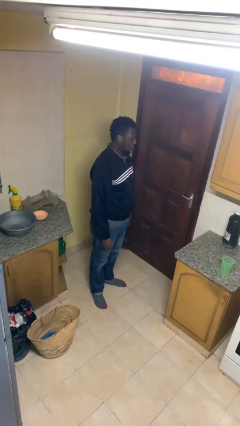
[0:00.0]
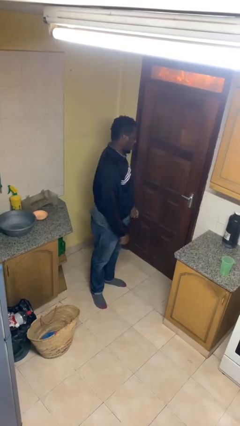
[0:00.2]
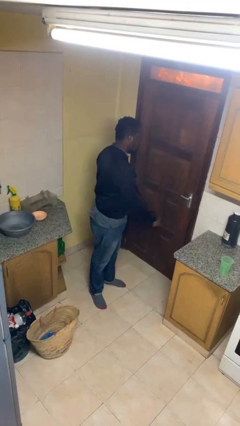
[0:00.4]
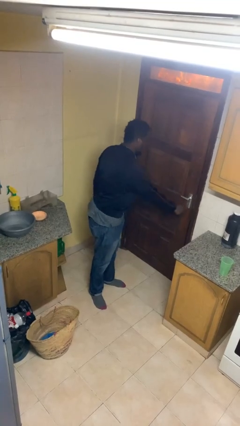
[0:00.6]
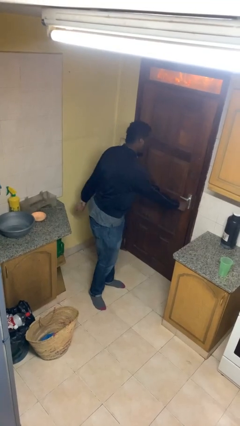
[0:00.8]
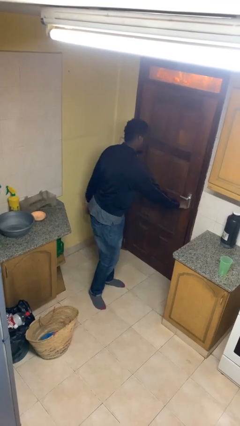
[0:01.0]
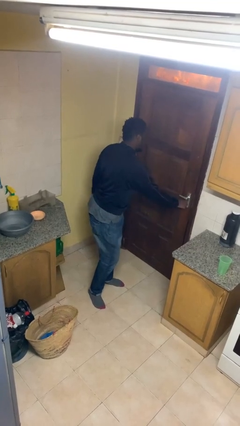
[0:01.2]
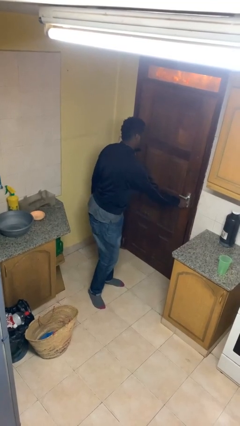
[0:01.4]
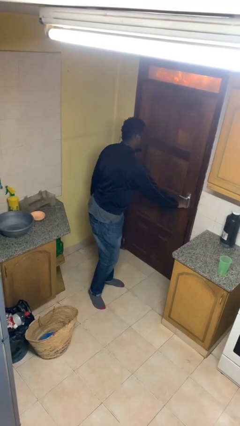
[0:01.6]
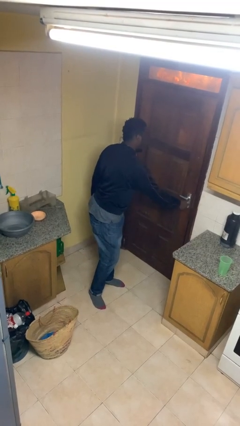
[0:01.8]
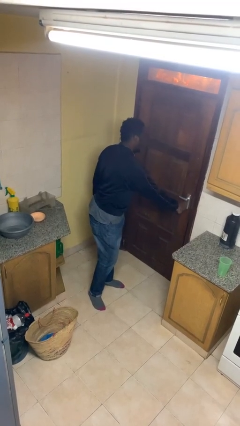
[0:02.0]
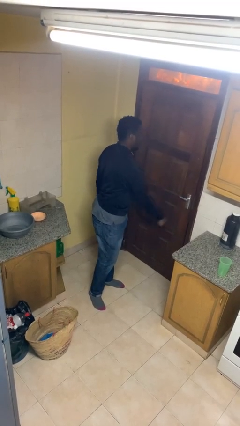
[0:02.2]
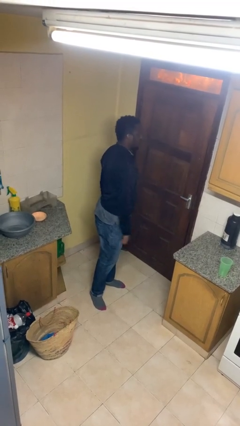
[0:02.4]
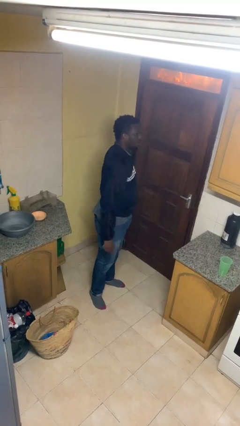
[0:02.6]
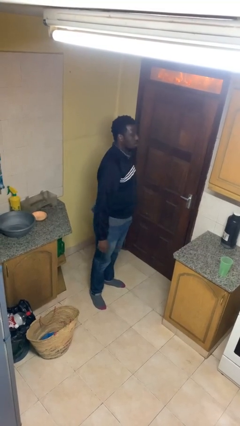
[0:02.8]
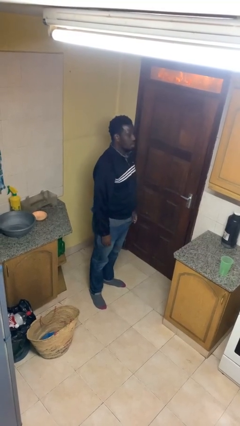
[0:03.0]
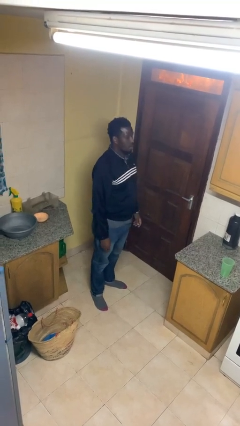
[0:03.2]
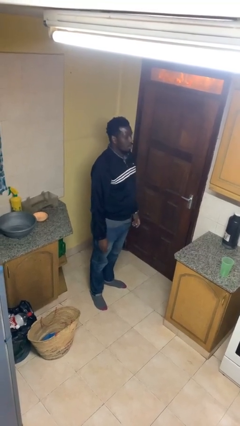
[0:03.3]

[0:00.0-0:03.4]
person locks door with keys

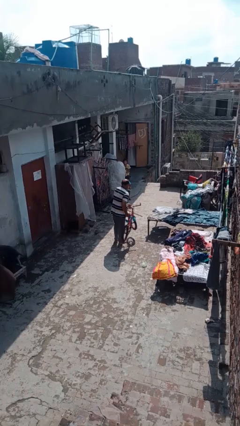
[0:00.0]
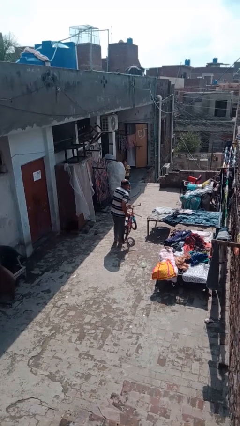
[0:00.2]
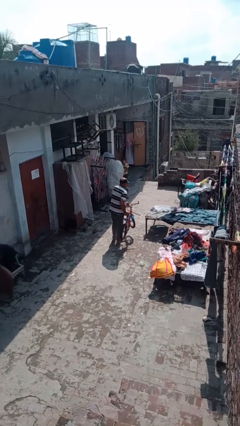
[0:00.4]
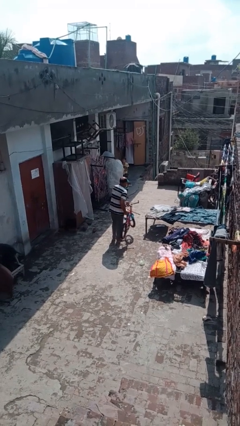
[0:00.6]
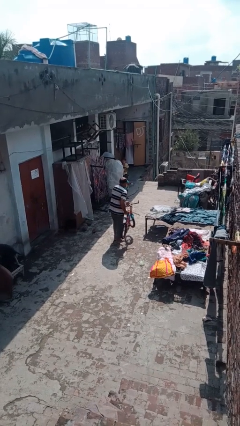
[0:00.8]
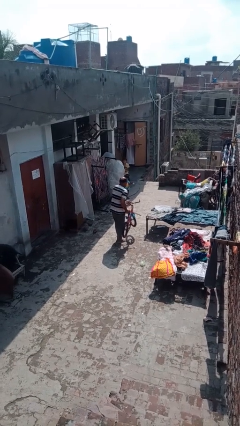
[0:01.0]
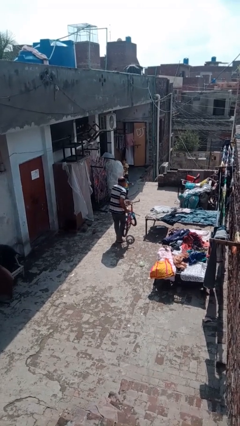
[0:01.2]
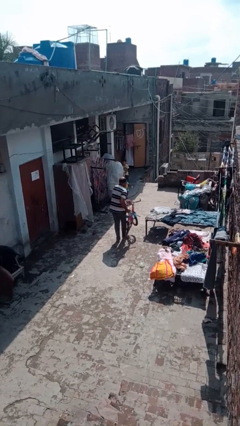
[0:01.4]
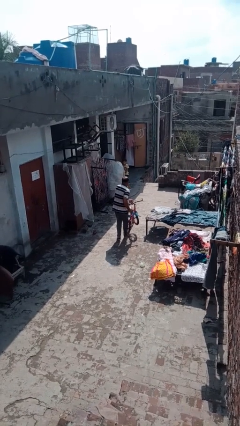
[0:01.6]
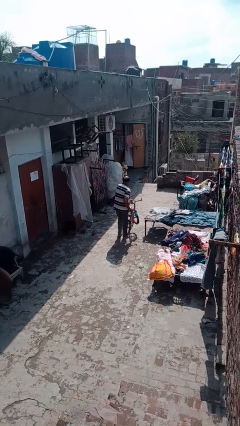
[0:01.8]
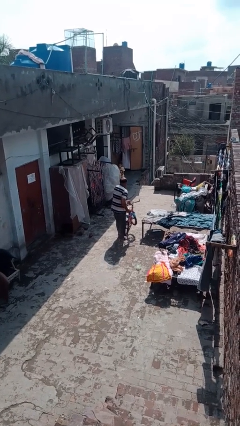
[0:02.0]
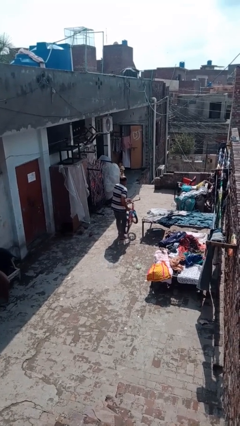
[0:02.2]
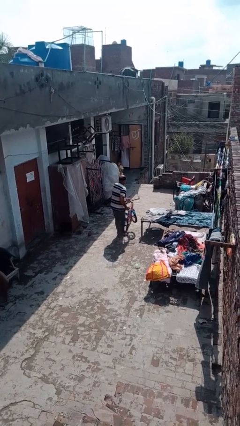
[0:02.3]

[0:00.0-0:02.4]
person carries bicycle

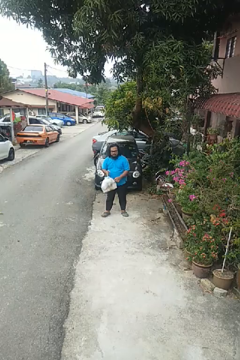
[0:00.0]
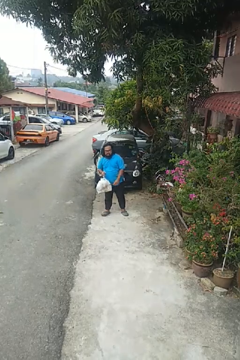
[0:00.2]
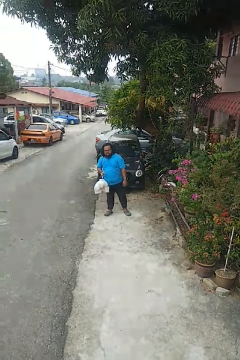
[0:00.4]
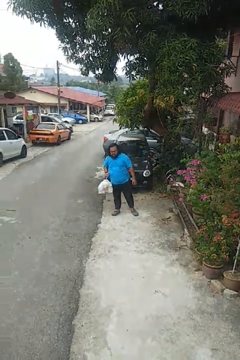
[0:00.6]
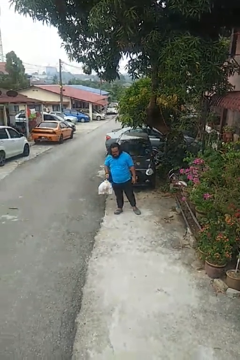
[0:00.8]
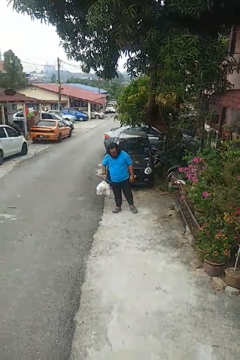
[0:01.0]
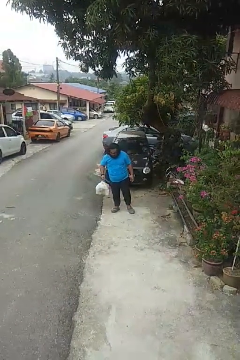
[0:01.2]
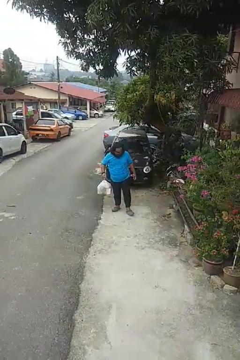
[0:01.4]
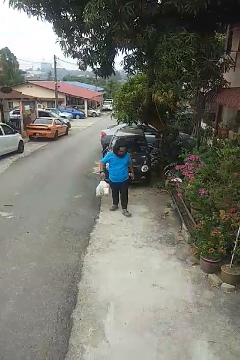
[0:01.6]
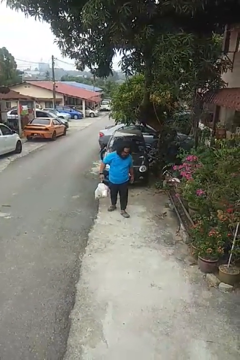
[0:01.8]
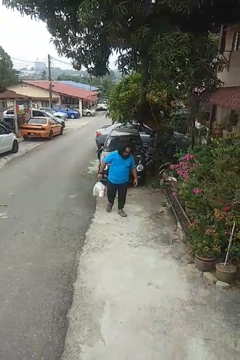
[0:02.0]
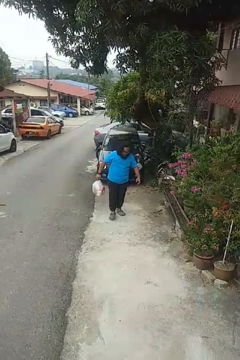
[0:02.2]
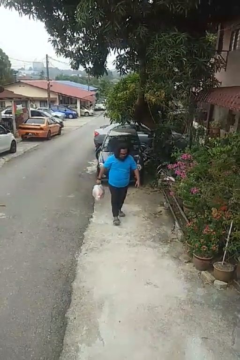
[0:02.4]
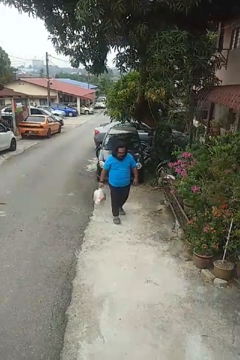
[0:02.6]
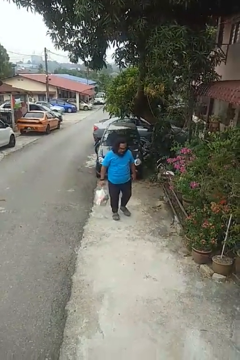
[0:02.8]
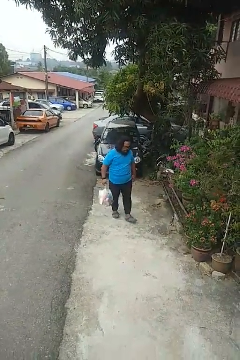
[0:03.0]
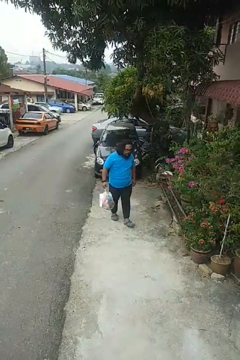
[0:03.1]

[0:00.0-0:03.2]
person carries groceries

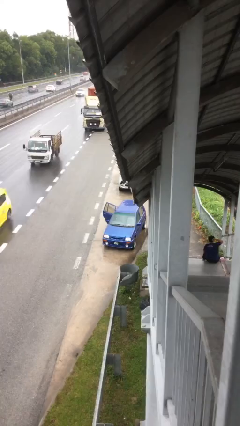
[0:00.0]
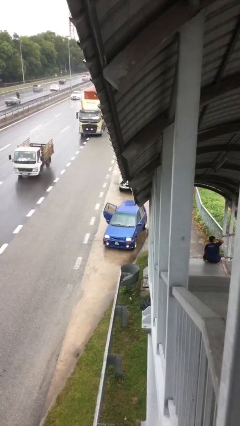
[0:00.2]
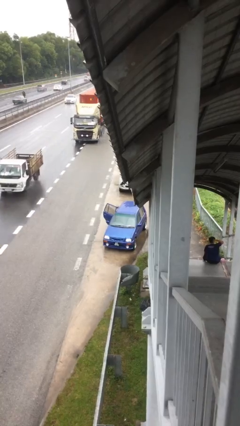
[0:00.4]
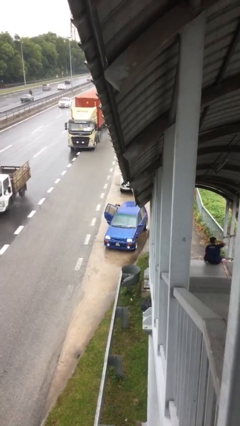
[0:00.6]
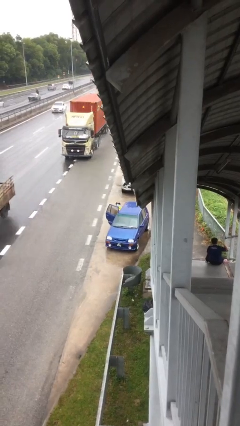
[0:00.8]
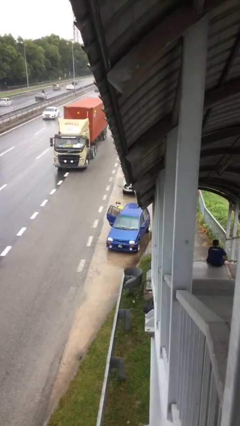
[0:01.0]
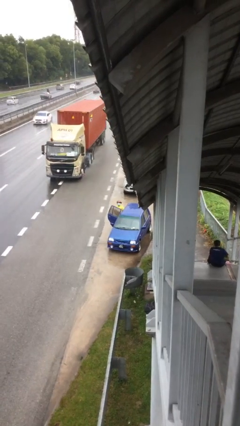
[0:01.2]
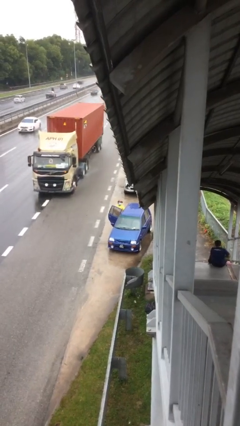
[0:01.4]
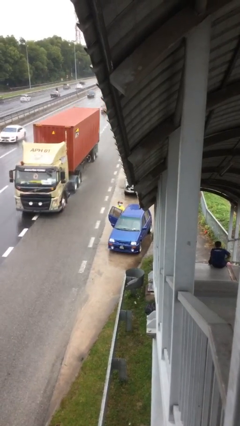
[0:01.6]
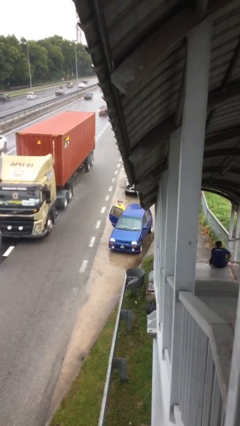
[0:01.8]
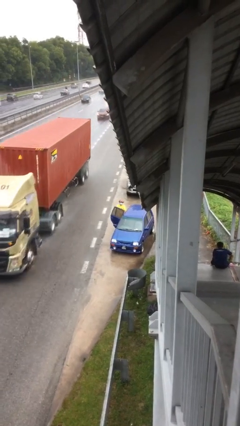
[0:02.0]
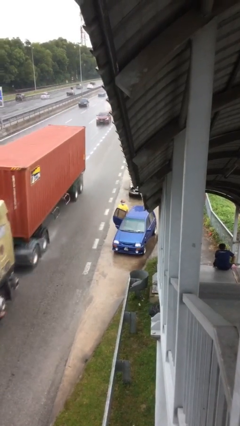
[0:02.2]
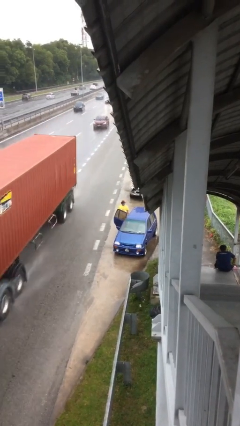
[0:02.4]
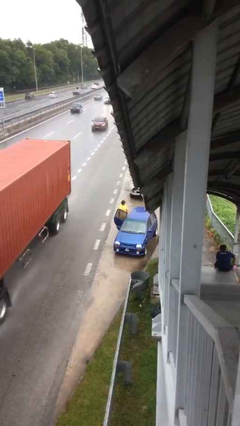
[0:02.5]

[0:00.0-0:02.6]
person exits car

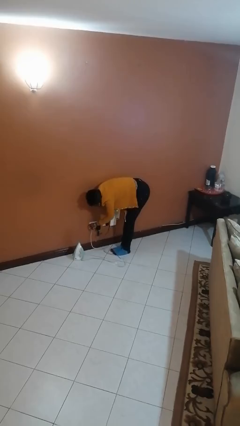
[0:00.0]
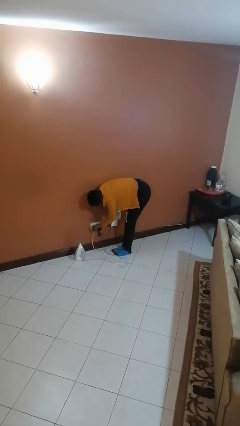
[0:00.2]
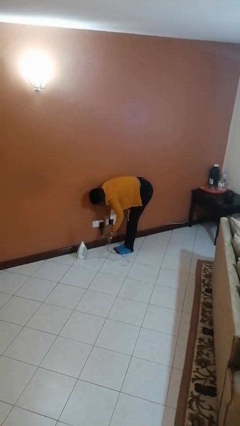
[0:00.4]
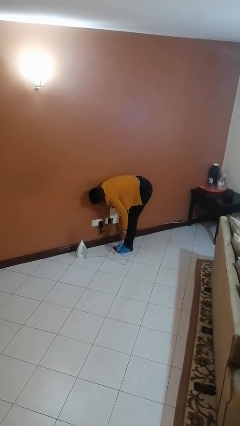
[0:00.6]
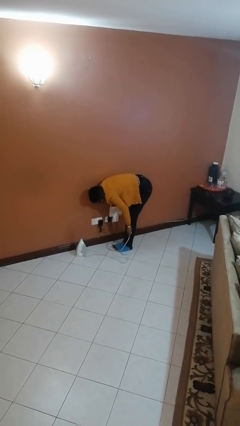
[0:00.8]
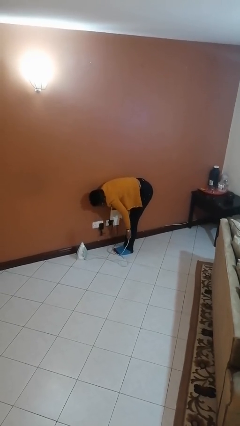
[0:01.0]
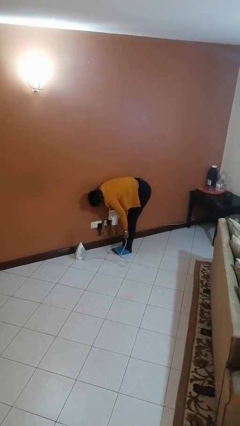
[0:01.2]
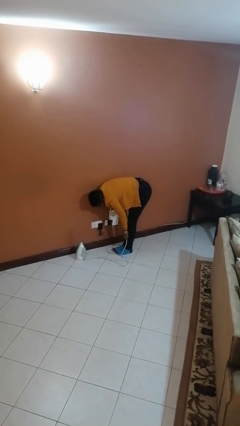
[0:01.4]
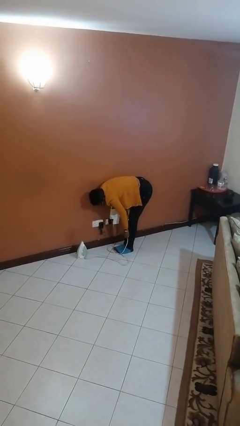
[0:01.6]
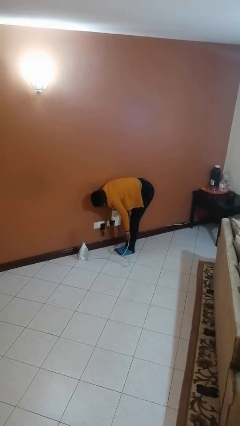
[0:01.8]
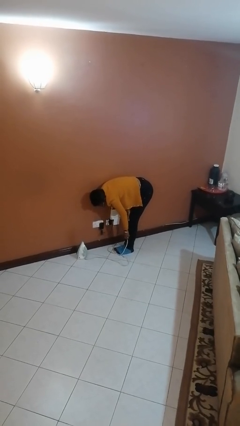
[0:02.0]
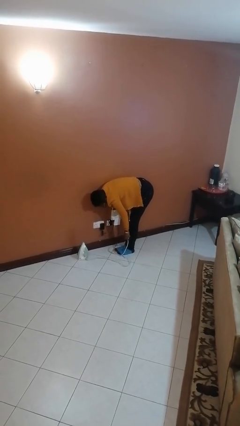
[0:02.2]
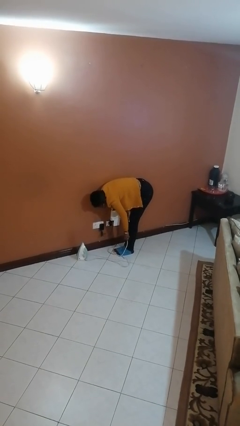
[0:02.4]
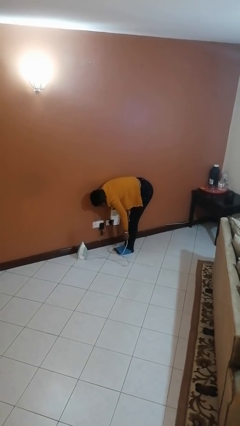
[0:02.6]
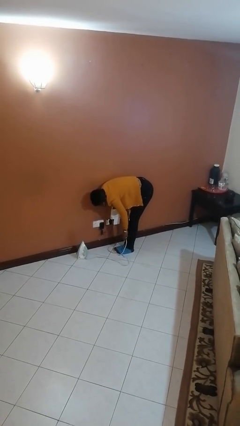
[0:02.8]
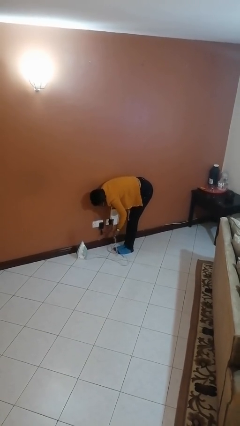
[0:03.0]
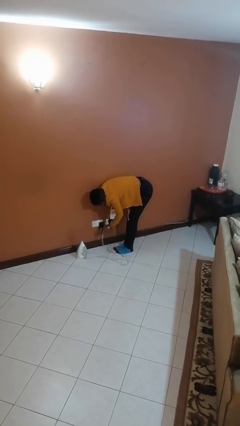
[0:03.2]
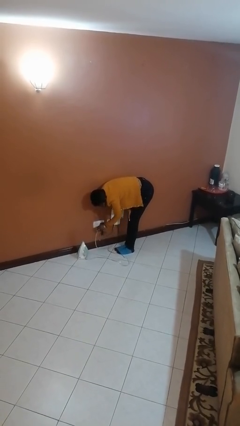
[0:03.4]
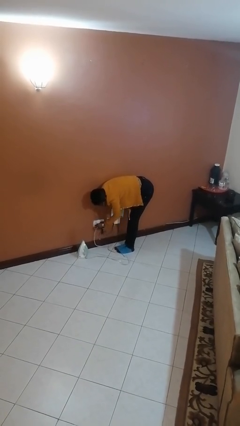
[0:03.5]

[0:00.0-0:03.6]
person unplugs from electrical socket

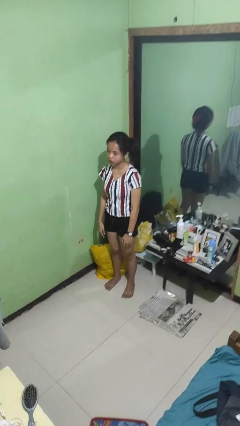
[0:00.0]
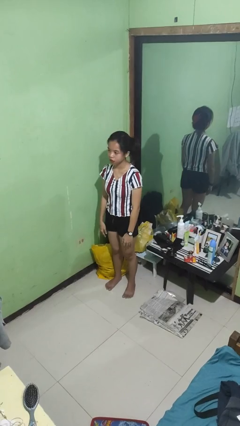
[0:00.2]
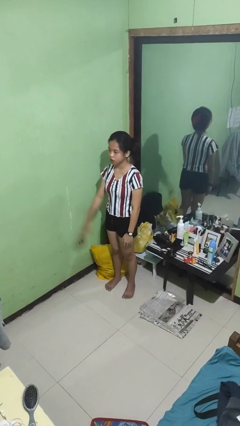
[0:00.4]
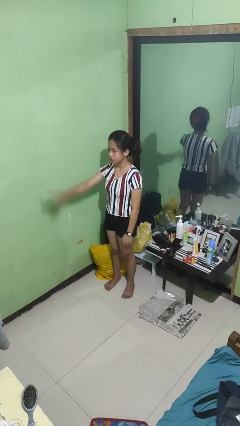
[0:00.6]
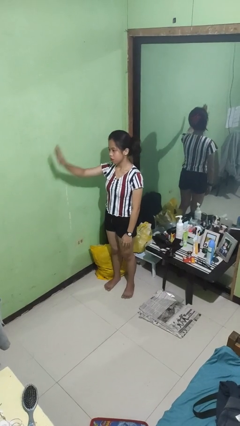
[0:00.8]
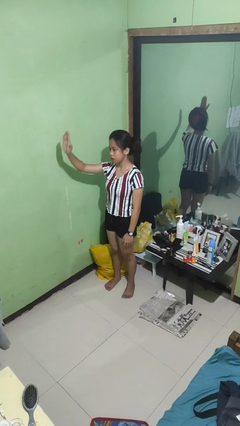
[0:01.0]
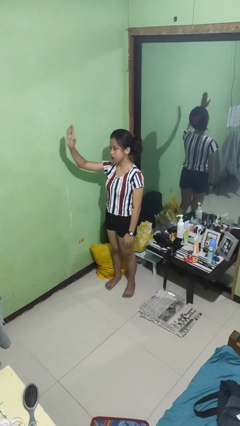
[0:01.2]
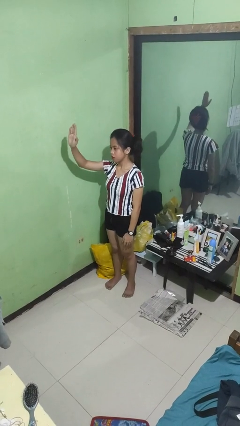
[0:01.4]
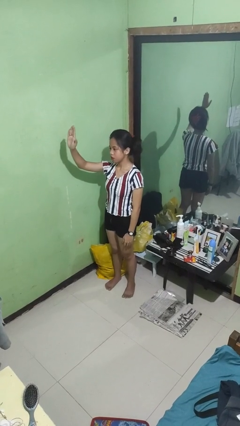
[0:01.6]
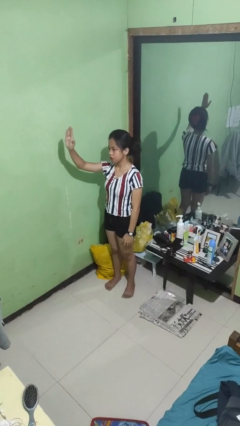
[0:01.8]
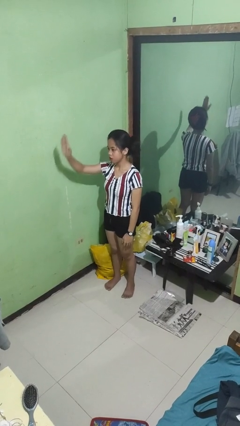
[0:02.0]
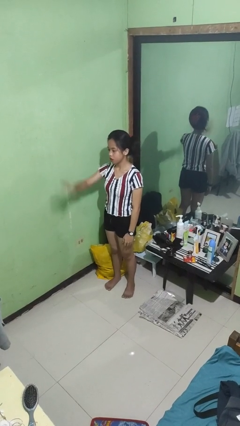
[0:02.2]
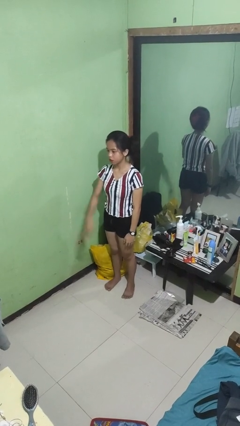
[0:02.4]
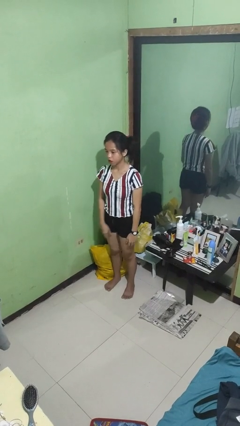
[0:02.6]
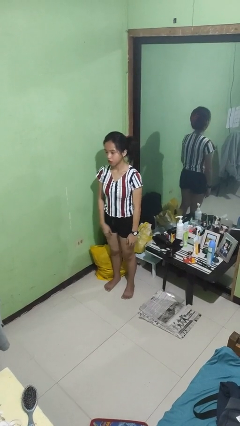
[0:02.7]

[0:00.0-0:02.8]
person gestures stop
